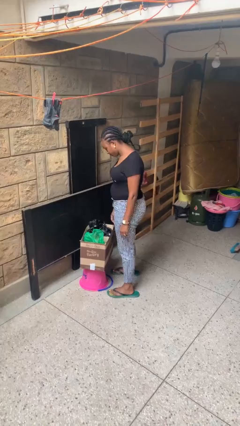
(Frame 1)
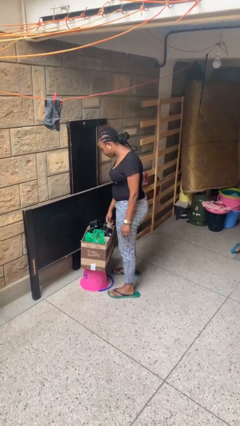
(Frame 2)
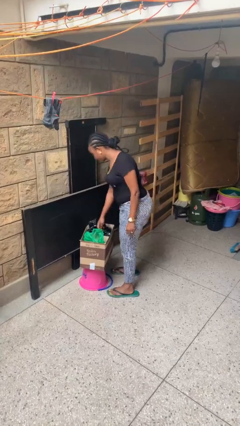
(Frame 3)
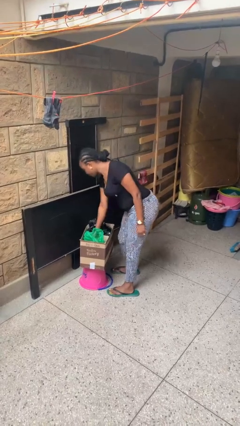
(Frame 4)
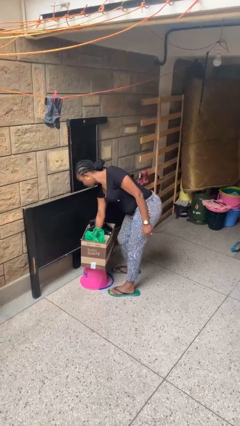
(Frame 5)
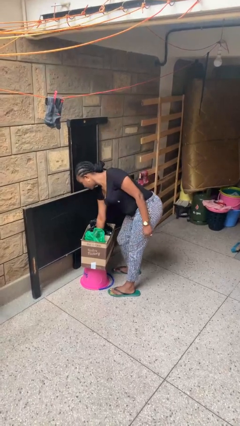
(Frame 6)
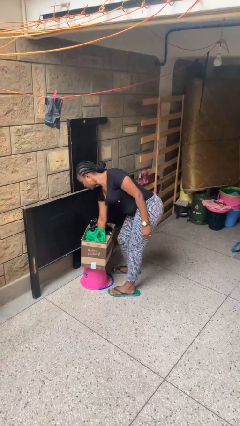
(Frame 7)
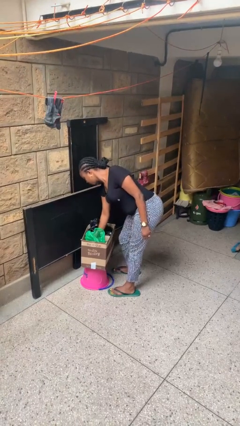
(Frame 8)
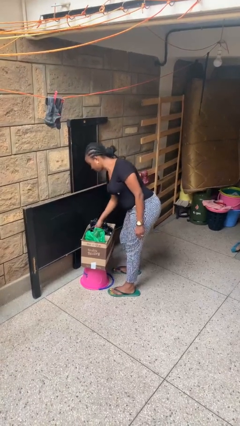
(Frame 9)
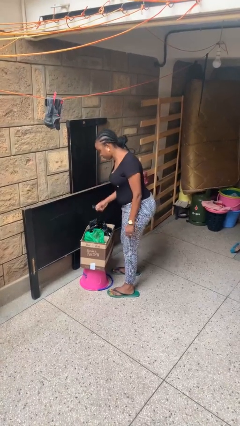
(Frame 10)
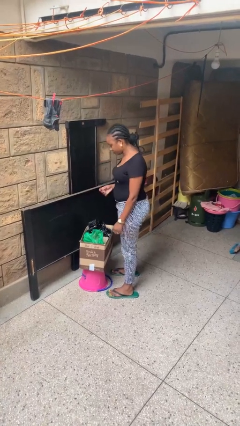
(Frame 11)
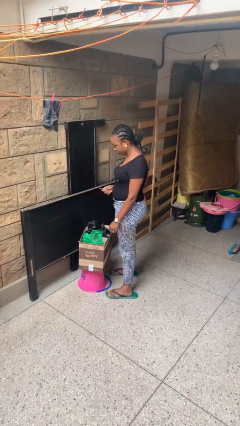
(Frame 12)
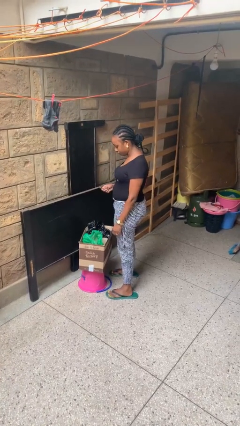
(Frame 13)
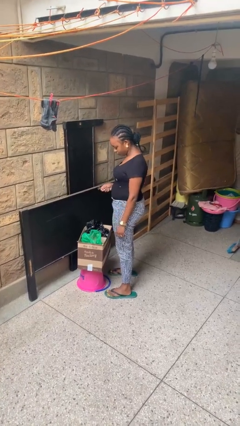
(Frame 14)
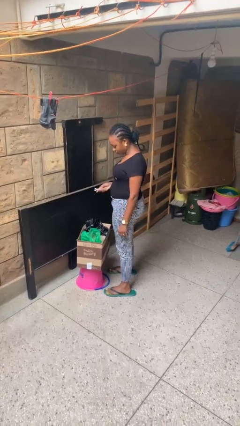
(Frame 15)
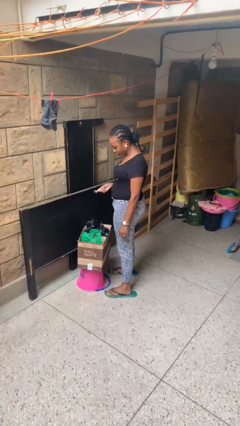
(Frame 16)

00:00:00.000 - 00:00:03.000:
person takes object from box

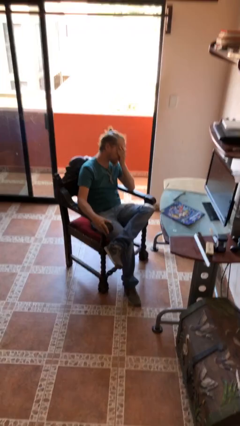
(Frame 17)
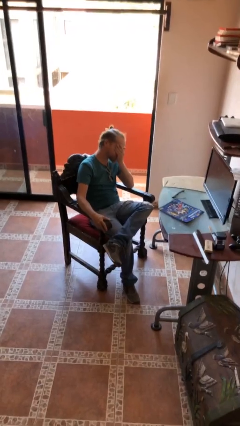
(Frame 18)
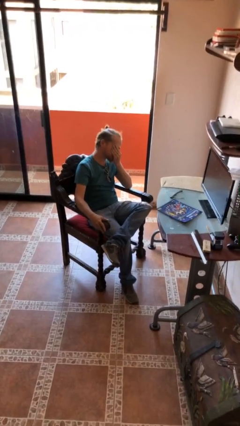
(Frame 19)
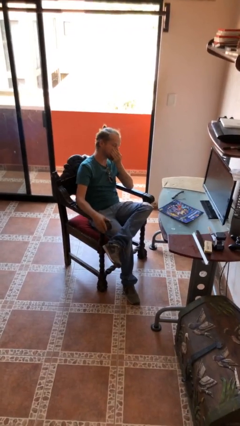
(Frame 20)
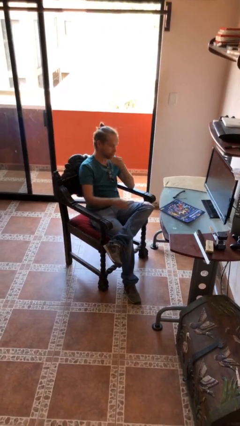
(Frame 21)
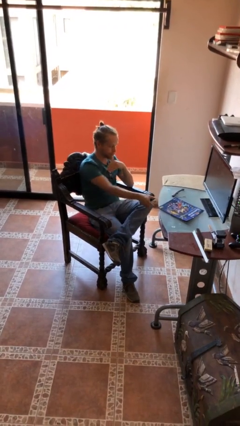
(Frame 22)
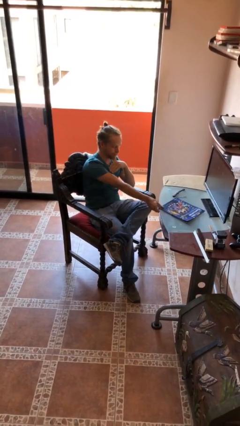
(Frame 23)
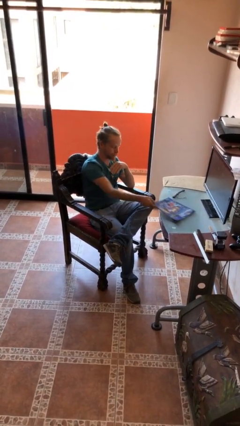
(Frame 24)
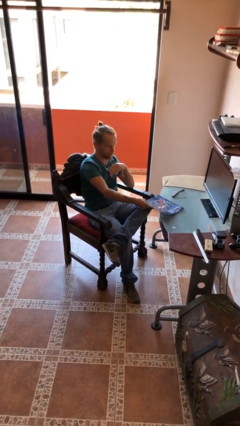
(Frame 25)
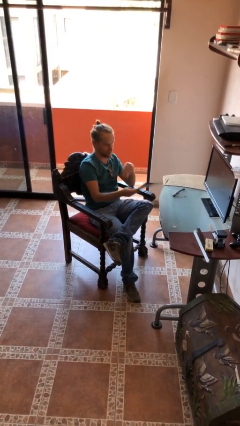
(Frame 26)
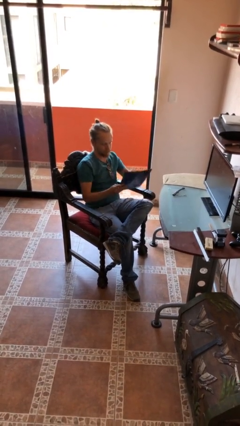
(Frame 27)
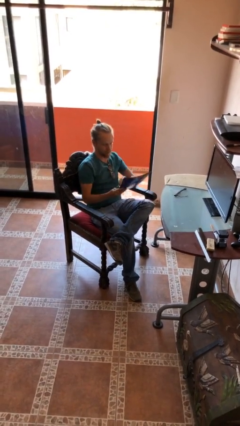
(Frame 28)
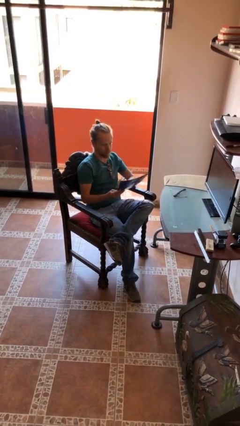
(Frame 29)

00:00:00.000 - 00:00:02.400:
person picks up object from table

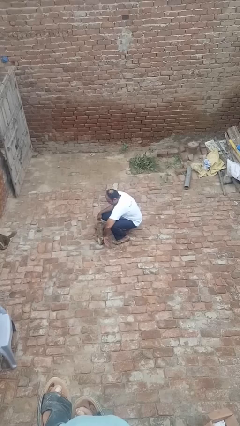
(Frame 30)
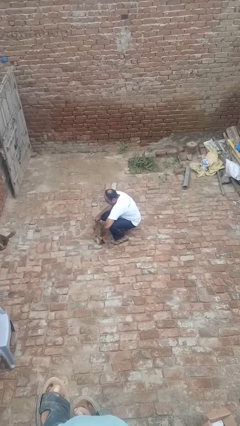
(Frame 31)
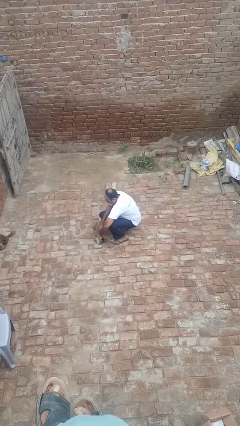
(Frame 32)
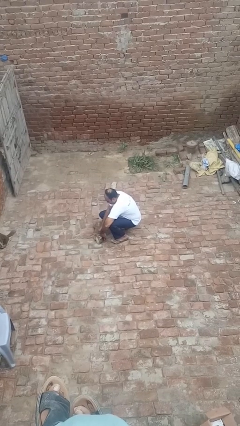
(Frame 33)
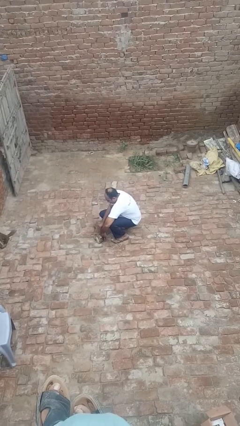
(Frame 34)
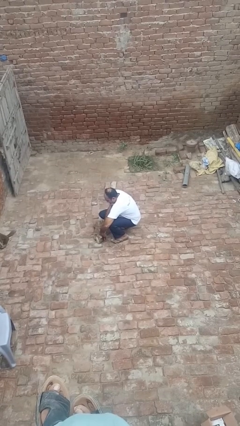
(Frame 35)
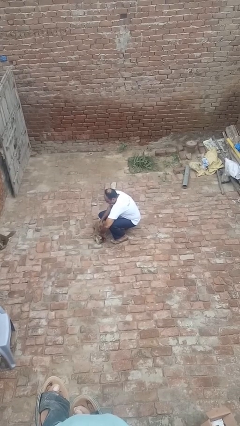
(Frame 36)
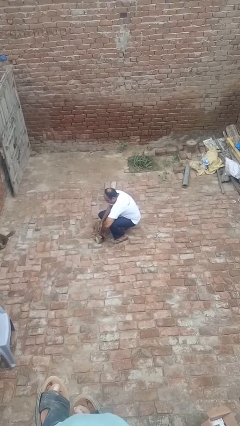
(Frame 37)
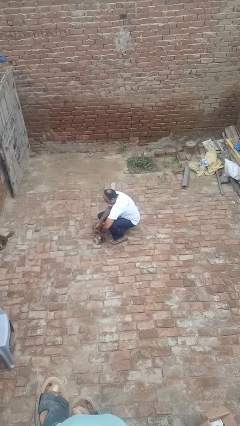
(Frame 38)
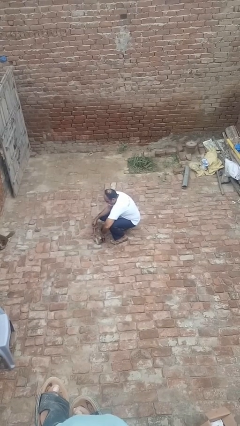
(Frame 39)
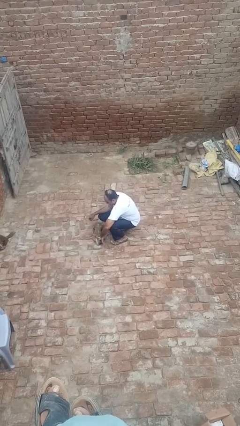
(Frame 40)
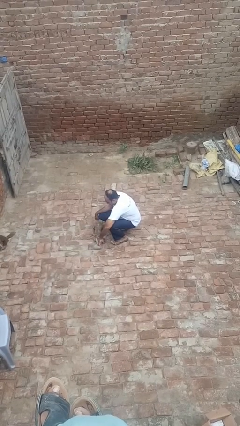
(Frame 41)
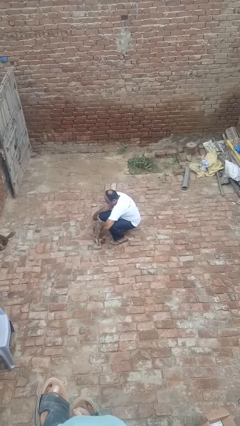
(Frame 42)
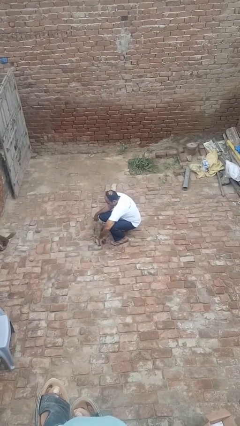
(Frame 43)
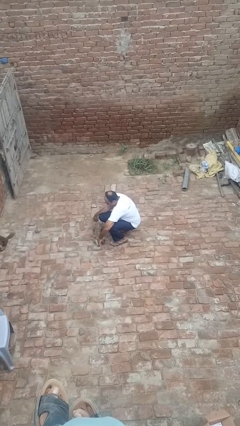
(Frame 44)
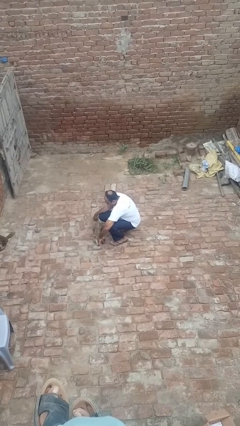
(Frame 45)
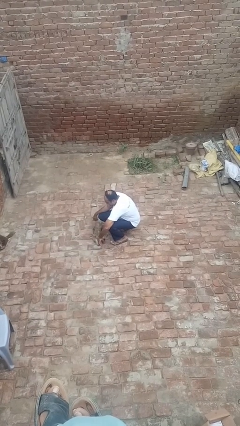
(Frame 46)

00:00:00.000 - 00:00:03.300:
person unattaches leash from dog

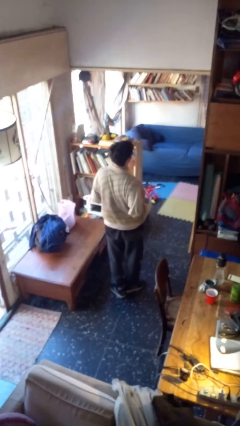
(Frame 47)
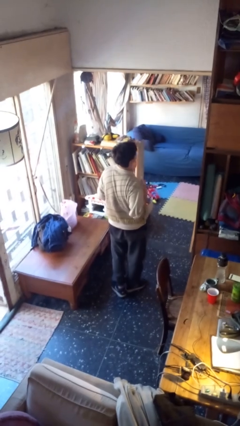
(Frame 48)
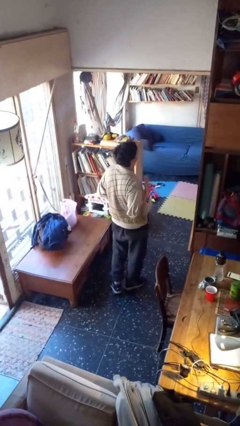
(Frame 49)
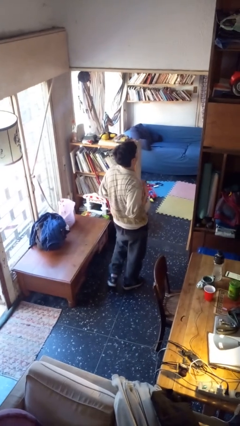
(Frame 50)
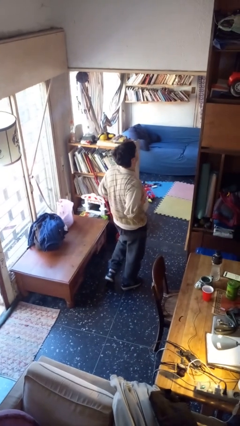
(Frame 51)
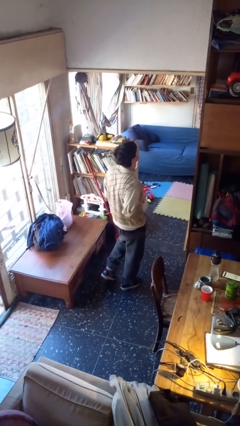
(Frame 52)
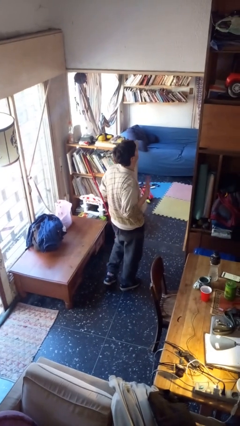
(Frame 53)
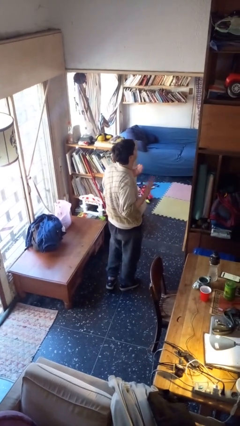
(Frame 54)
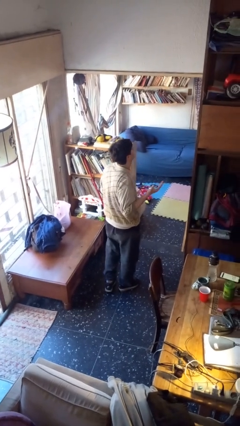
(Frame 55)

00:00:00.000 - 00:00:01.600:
person drums on chest

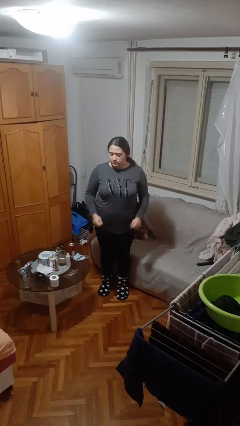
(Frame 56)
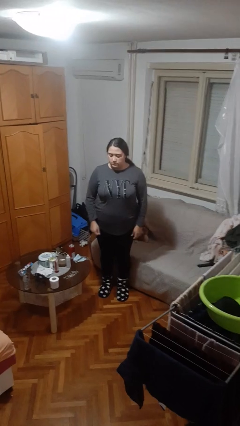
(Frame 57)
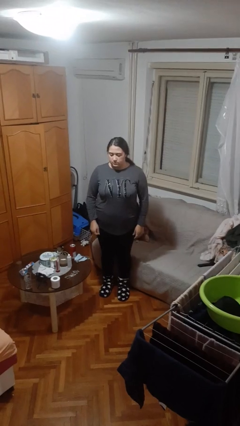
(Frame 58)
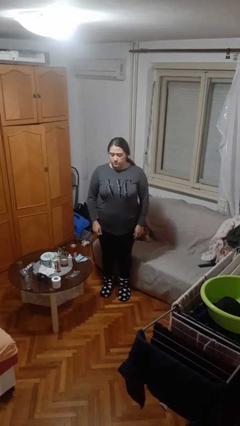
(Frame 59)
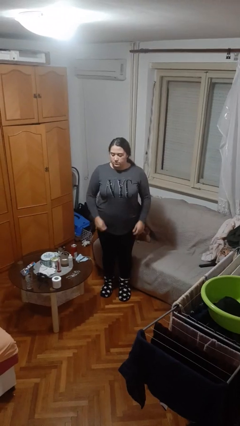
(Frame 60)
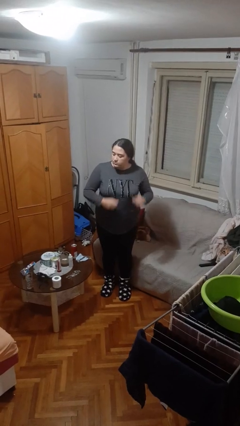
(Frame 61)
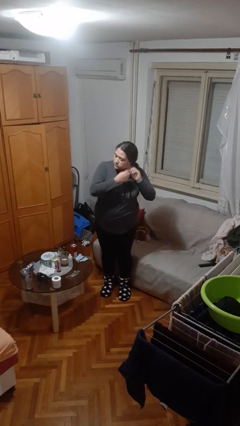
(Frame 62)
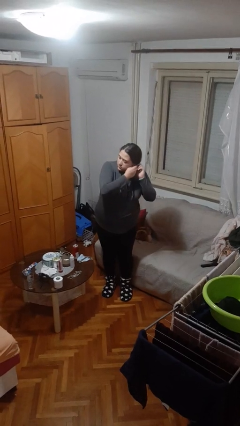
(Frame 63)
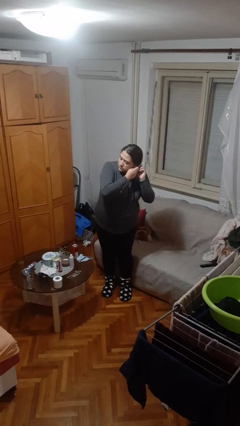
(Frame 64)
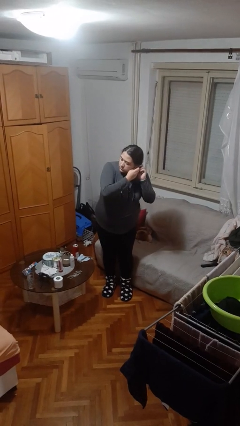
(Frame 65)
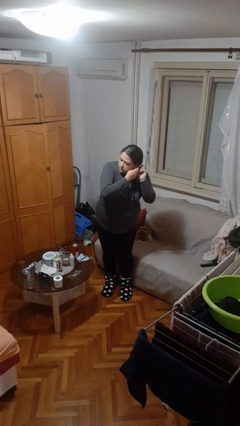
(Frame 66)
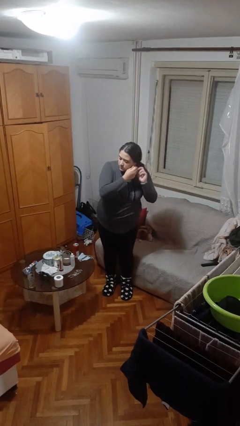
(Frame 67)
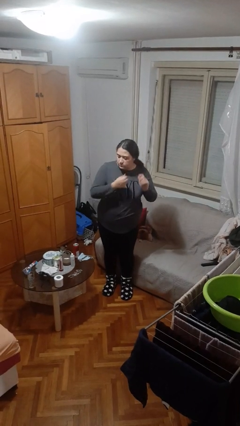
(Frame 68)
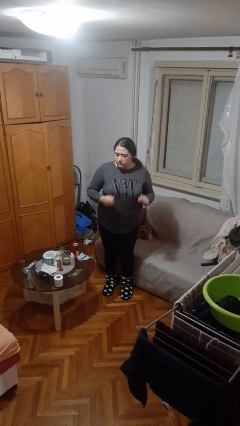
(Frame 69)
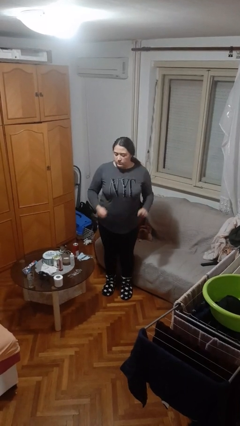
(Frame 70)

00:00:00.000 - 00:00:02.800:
person takes off earrings

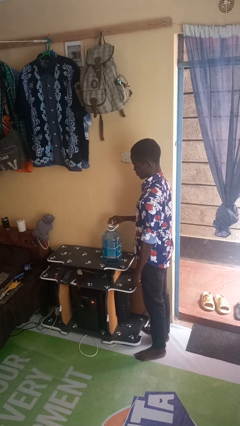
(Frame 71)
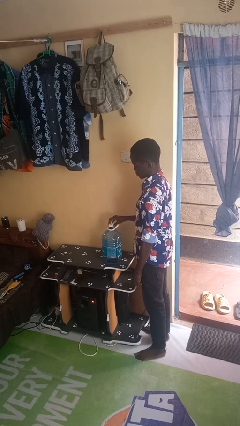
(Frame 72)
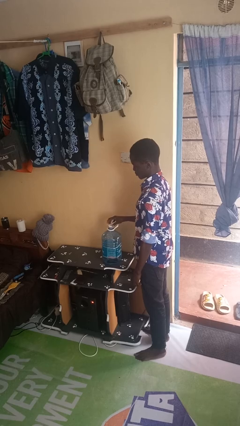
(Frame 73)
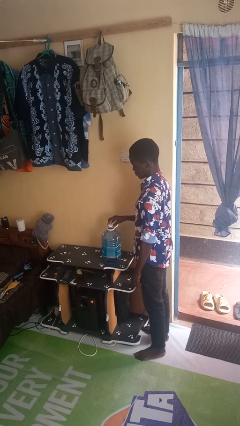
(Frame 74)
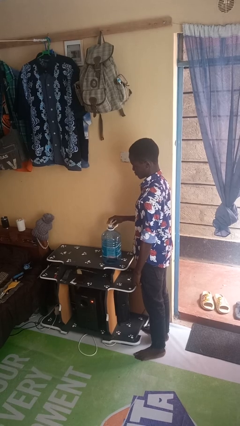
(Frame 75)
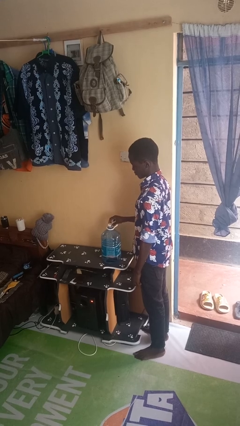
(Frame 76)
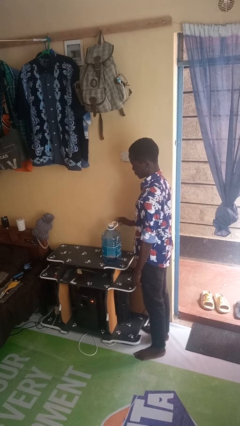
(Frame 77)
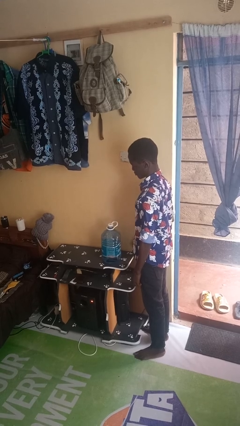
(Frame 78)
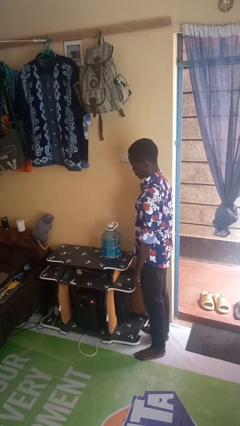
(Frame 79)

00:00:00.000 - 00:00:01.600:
person screws lid to bottle

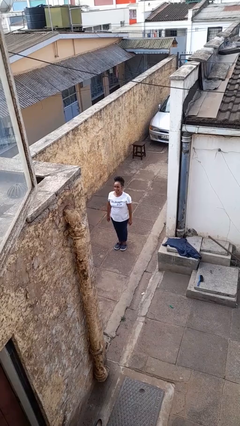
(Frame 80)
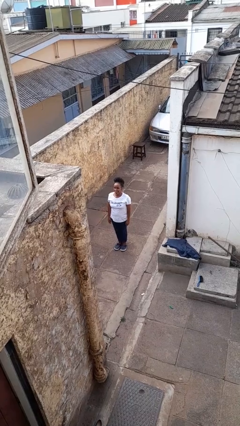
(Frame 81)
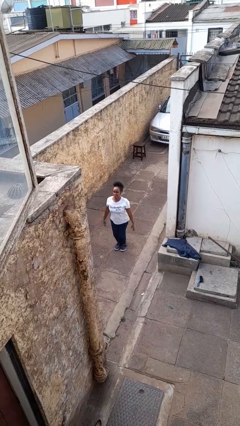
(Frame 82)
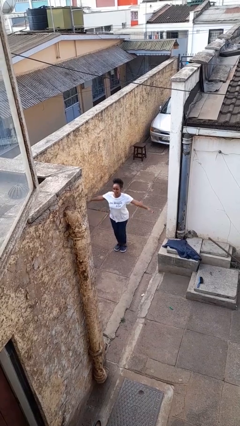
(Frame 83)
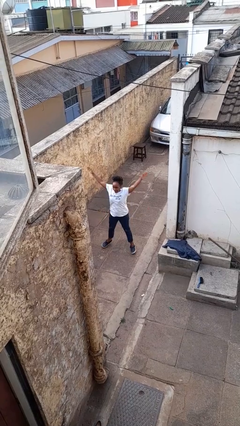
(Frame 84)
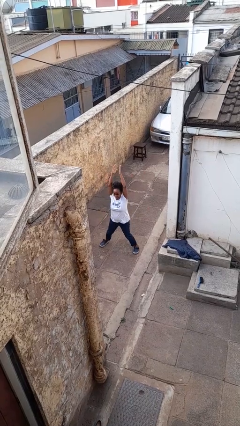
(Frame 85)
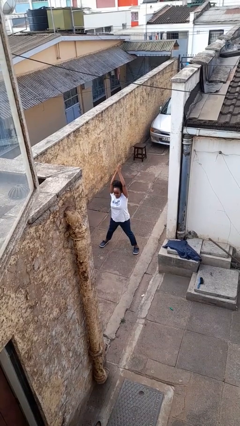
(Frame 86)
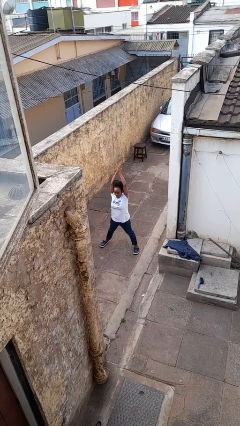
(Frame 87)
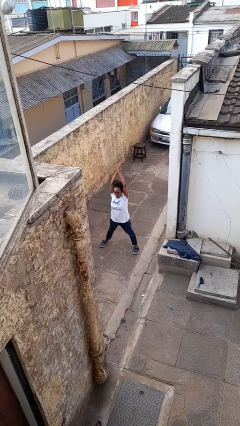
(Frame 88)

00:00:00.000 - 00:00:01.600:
person exercises with jumping jacks

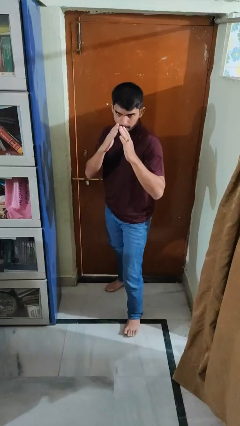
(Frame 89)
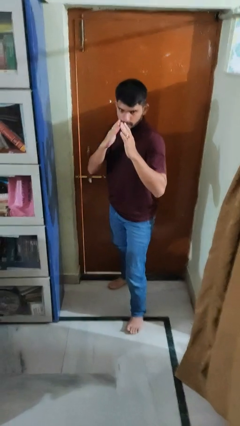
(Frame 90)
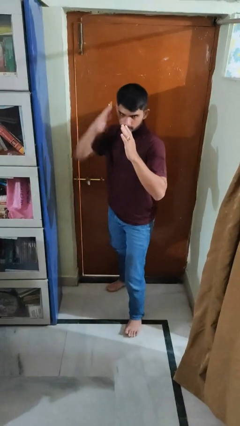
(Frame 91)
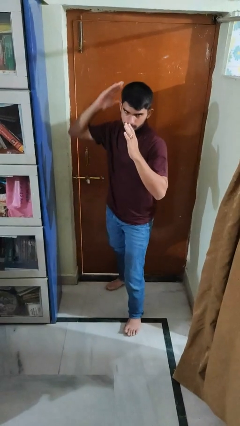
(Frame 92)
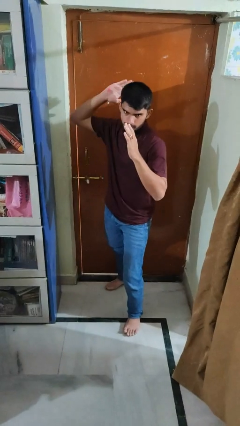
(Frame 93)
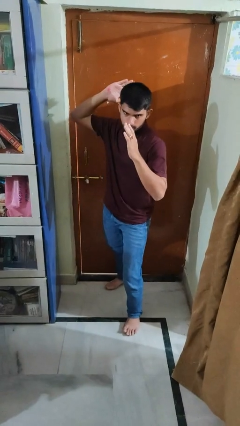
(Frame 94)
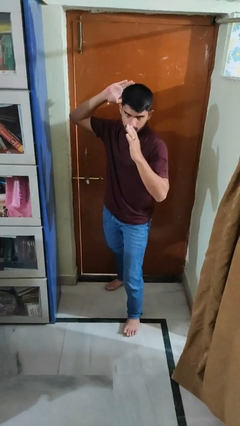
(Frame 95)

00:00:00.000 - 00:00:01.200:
person karate chop
